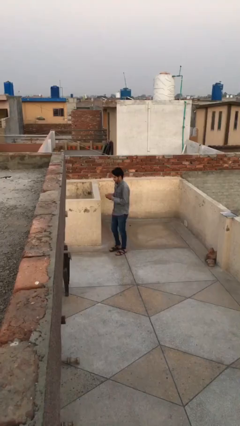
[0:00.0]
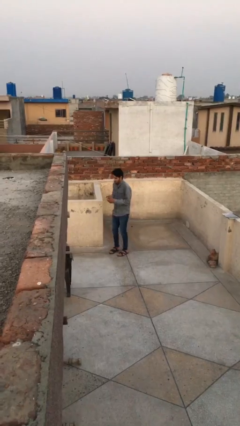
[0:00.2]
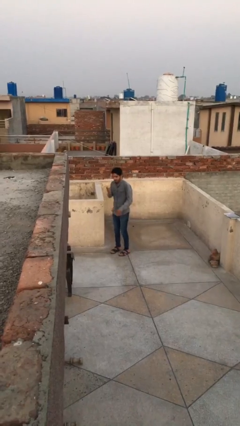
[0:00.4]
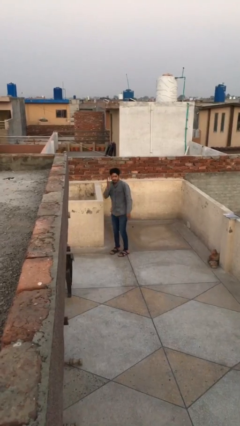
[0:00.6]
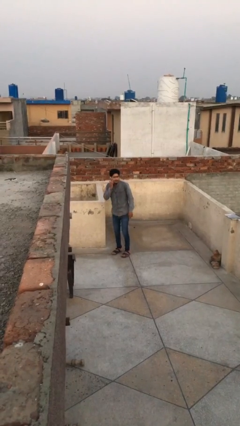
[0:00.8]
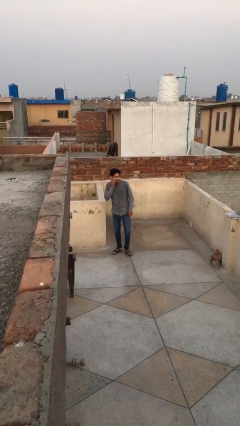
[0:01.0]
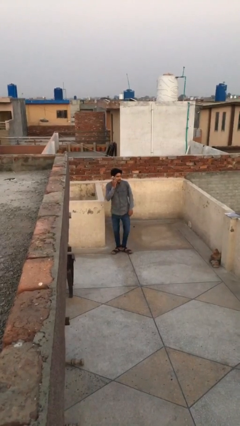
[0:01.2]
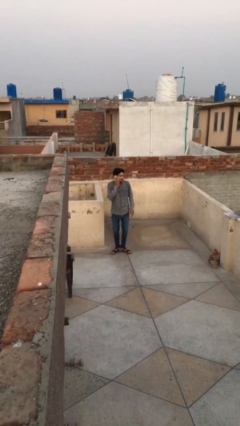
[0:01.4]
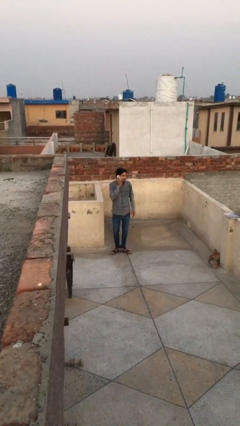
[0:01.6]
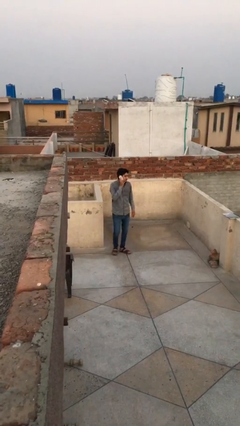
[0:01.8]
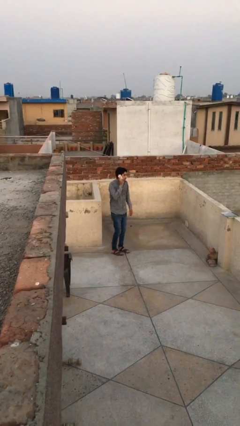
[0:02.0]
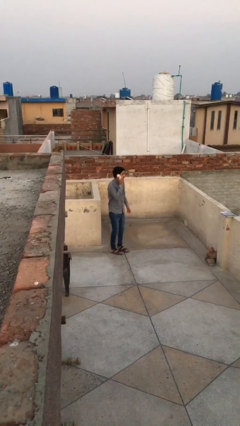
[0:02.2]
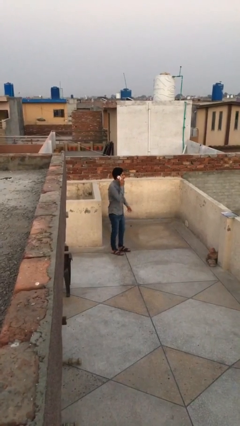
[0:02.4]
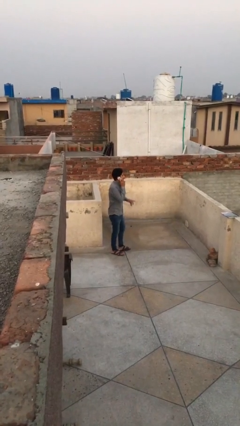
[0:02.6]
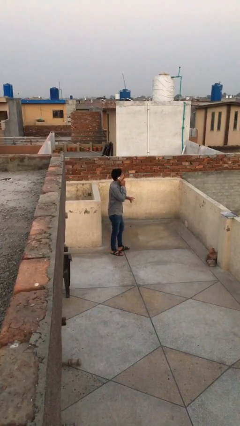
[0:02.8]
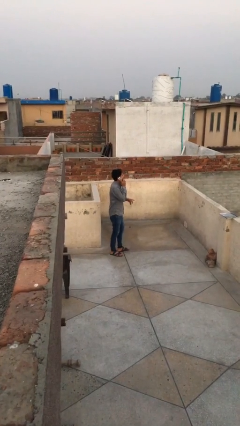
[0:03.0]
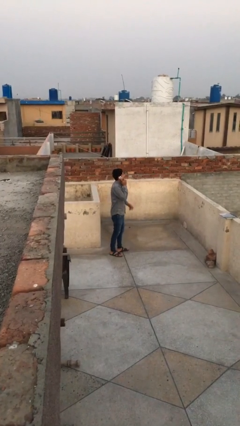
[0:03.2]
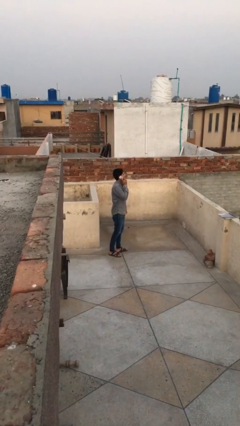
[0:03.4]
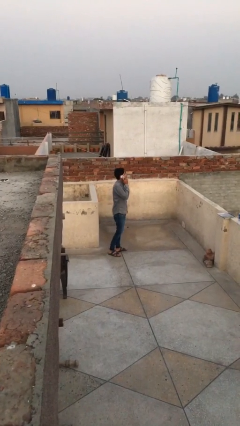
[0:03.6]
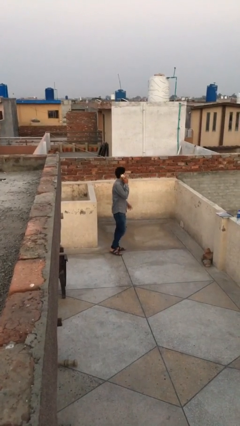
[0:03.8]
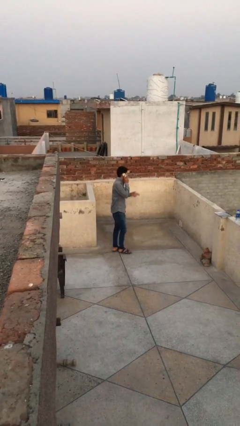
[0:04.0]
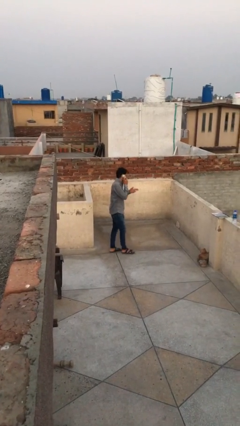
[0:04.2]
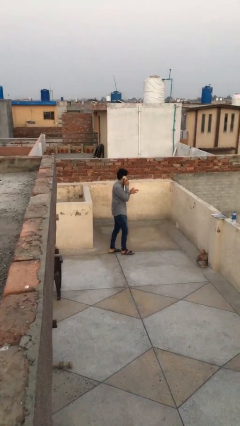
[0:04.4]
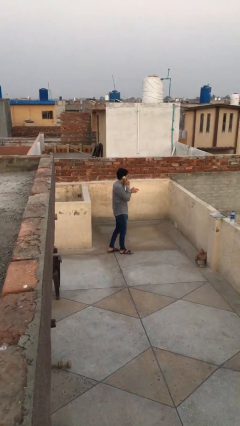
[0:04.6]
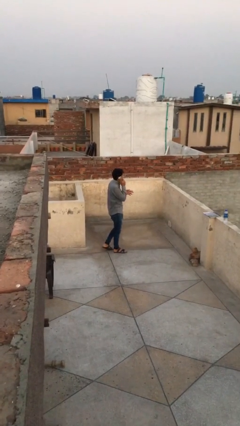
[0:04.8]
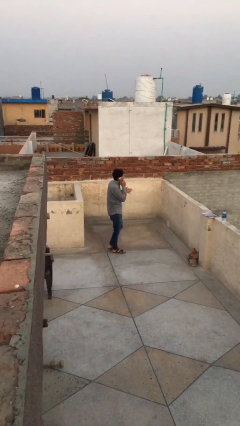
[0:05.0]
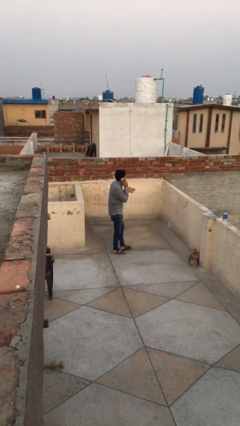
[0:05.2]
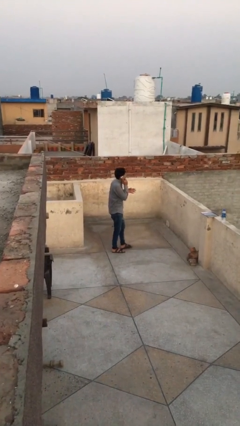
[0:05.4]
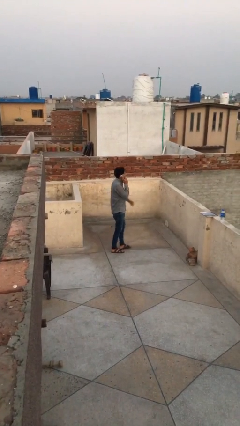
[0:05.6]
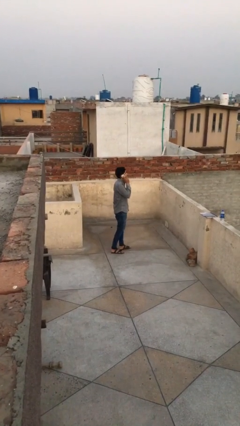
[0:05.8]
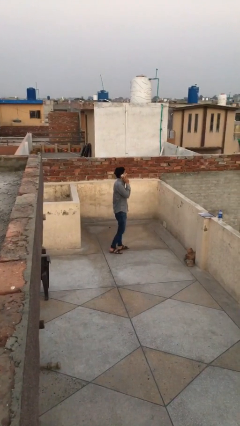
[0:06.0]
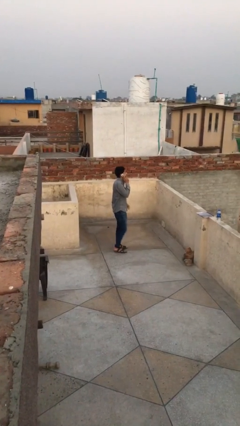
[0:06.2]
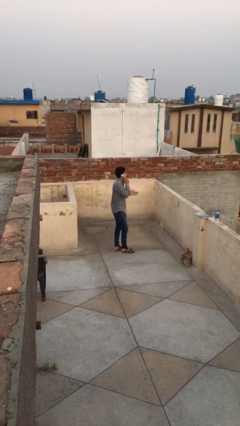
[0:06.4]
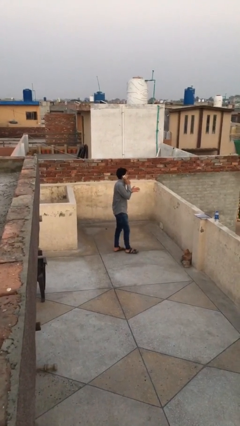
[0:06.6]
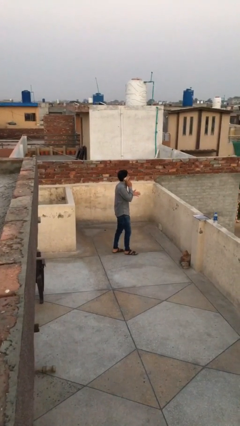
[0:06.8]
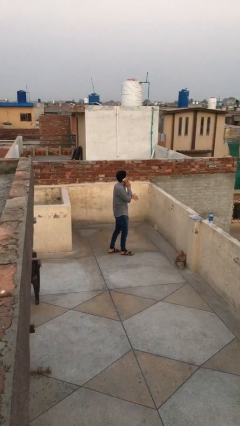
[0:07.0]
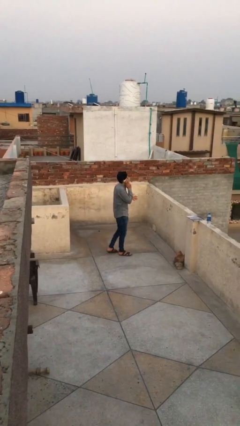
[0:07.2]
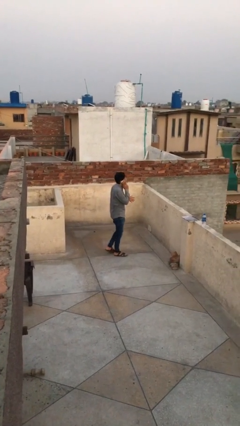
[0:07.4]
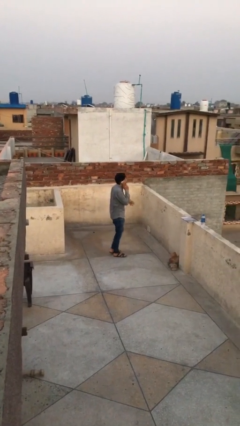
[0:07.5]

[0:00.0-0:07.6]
person talks on phone

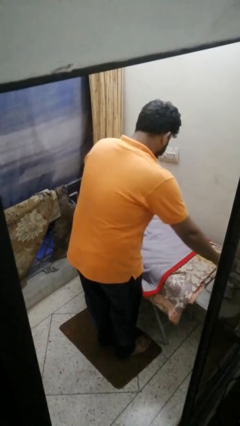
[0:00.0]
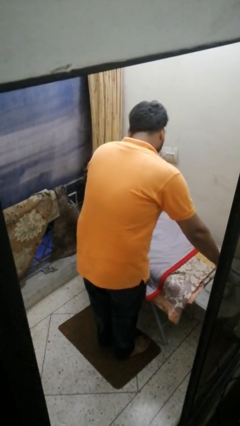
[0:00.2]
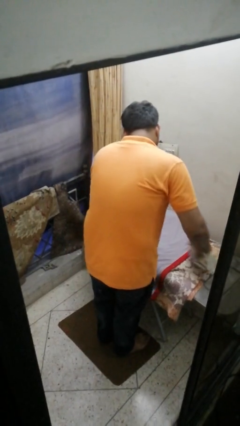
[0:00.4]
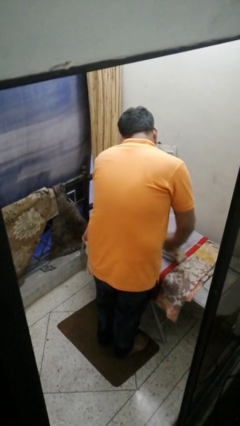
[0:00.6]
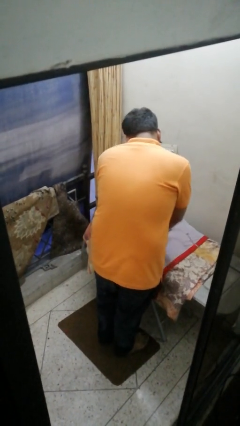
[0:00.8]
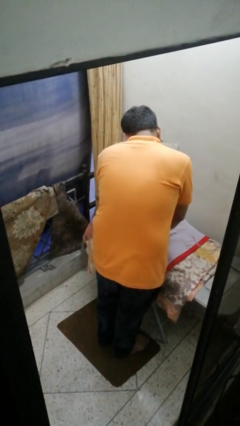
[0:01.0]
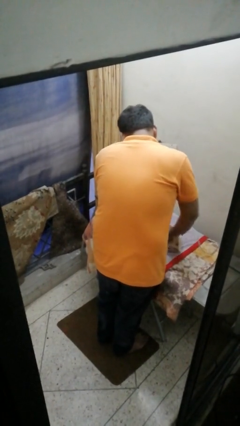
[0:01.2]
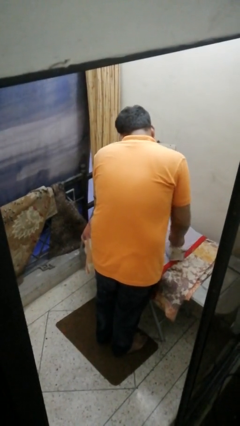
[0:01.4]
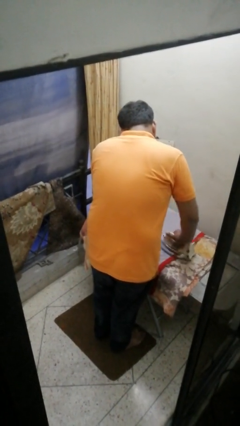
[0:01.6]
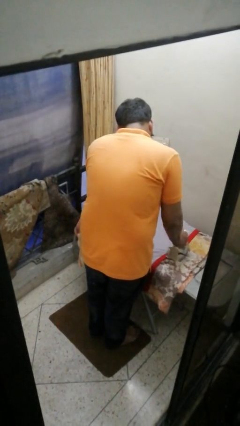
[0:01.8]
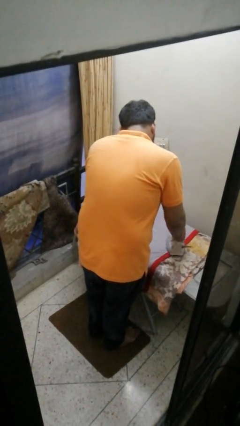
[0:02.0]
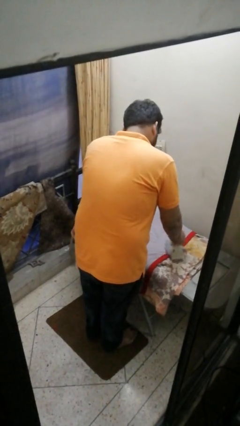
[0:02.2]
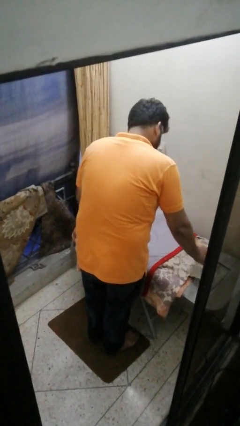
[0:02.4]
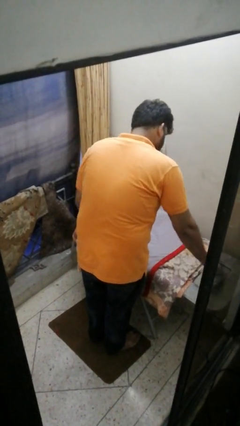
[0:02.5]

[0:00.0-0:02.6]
person irons clothes

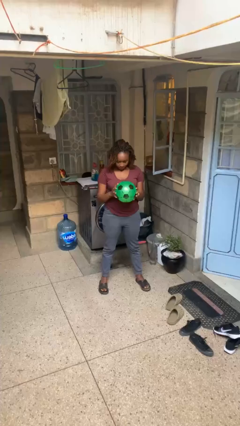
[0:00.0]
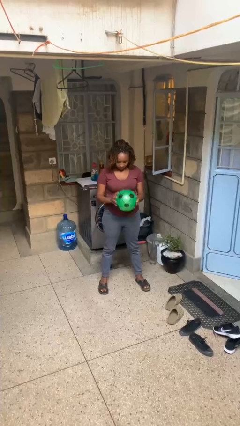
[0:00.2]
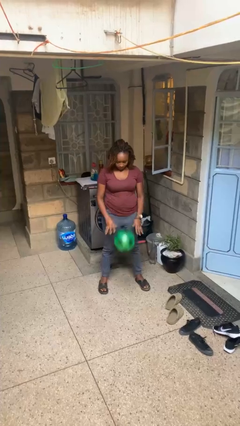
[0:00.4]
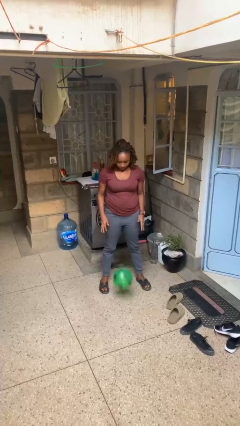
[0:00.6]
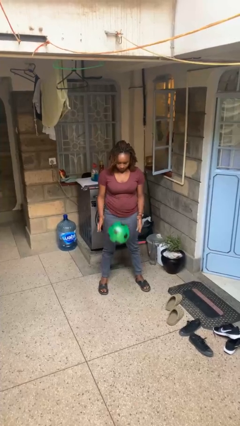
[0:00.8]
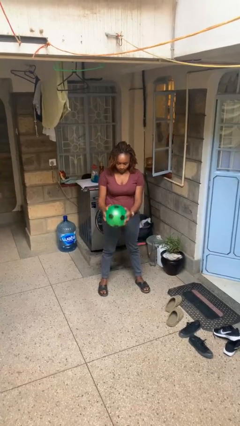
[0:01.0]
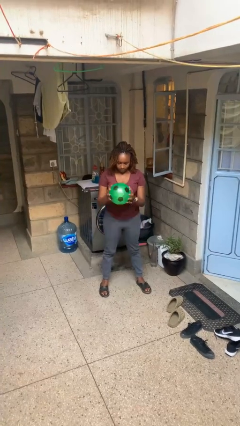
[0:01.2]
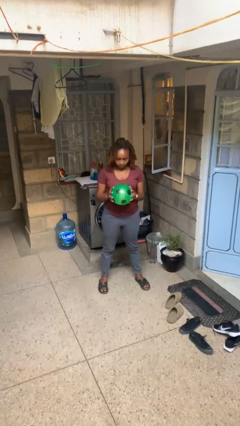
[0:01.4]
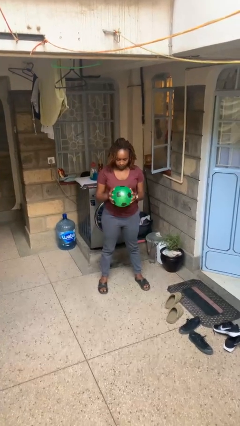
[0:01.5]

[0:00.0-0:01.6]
person bounces ball on floor

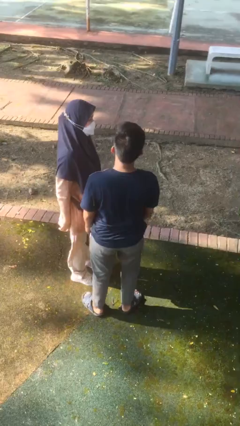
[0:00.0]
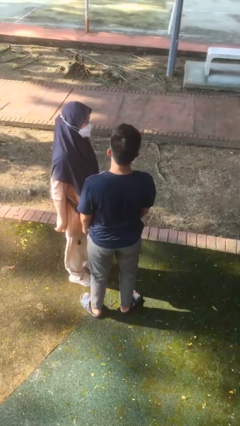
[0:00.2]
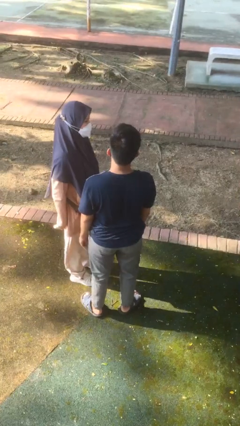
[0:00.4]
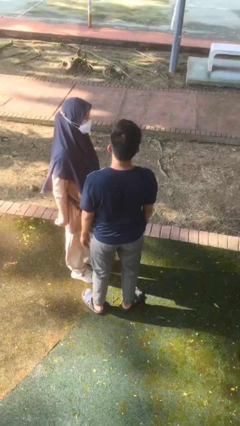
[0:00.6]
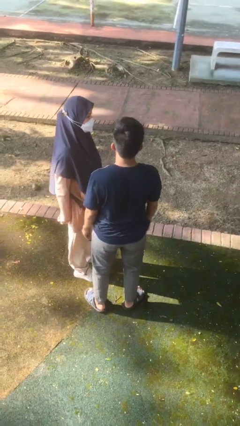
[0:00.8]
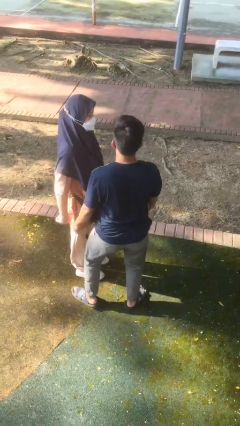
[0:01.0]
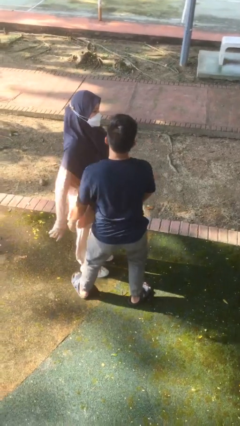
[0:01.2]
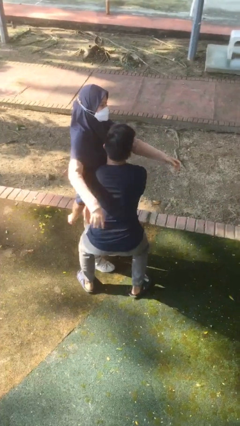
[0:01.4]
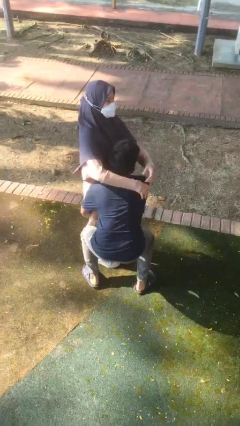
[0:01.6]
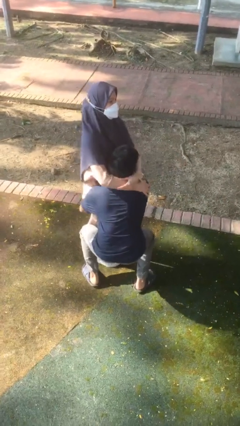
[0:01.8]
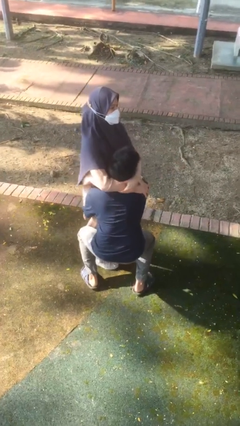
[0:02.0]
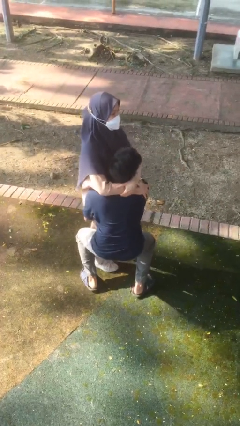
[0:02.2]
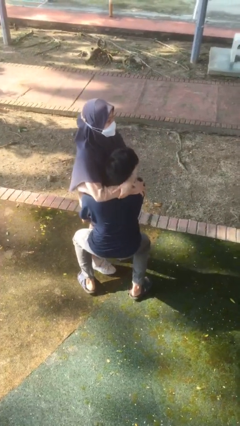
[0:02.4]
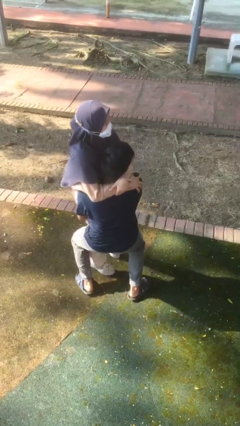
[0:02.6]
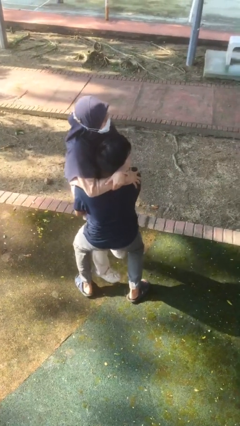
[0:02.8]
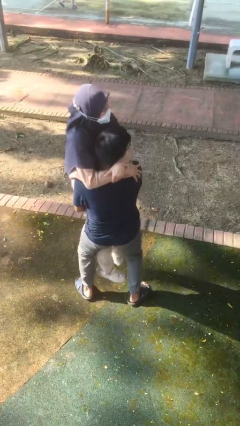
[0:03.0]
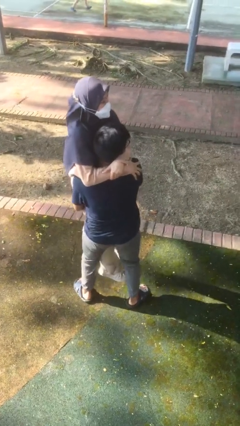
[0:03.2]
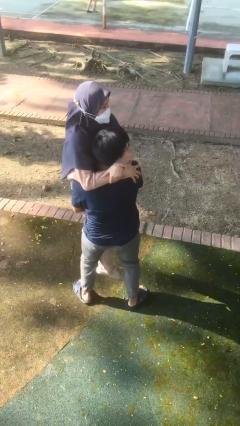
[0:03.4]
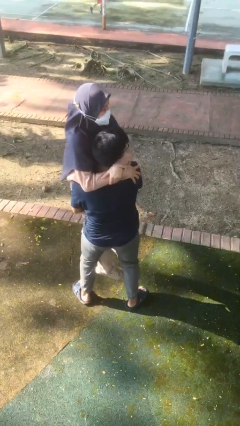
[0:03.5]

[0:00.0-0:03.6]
person picks up person

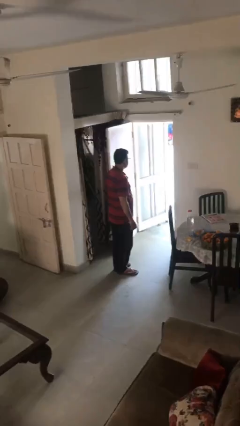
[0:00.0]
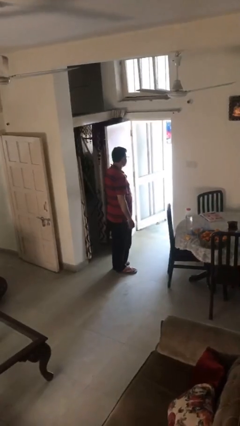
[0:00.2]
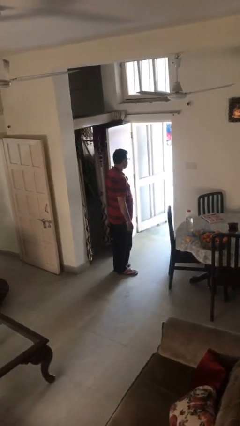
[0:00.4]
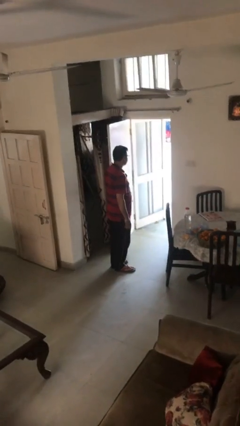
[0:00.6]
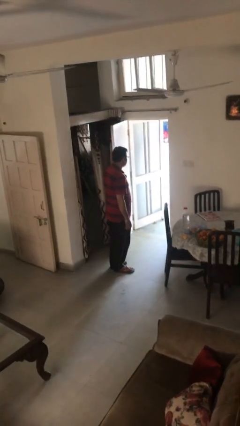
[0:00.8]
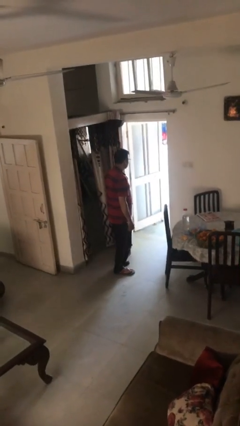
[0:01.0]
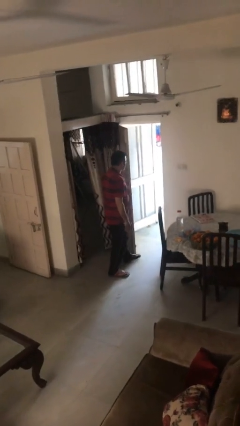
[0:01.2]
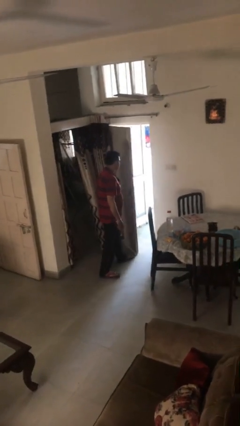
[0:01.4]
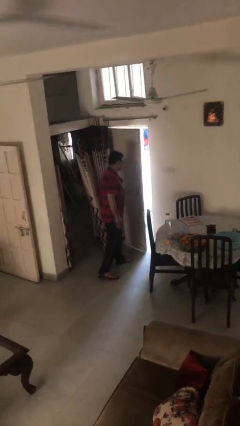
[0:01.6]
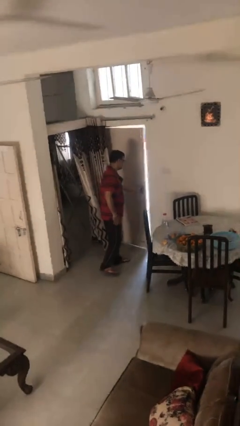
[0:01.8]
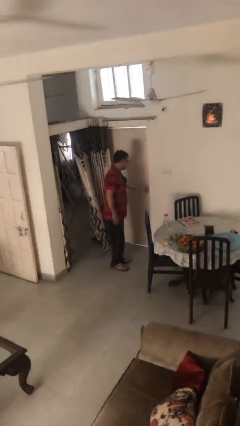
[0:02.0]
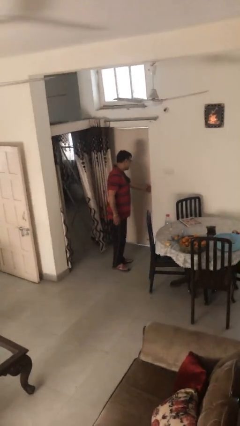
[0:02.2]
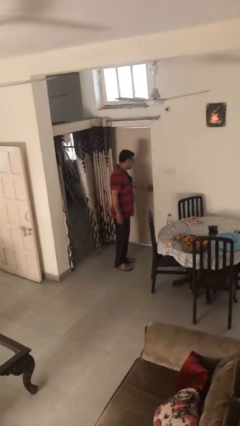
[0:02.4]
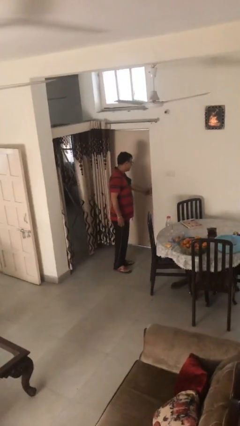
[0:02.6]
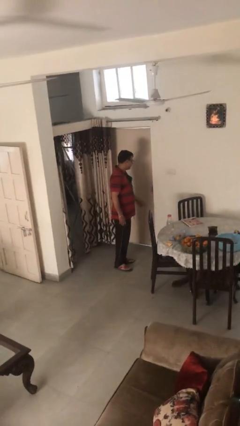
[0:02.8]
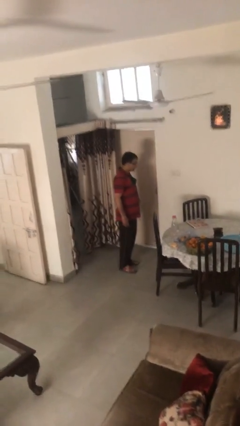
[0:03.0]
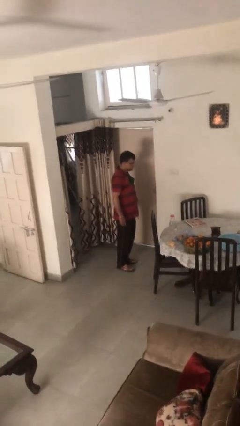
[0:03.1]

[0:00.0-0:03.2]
person closes facility door
